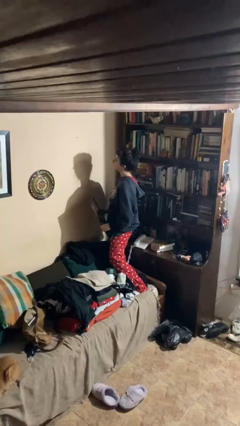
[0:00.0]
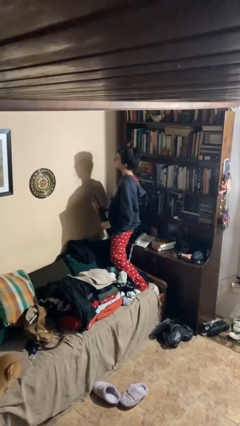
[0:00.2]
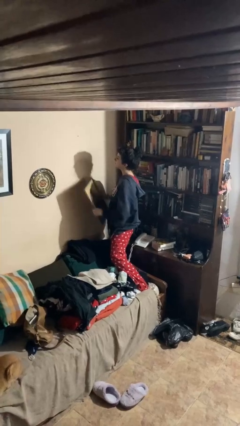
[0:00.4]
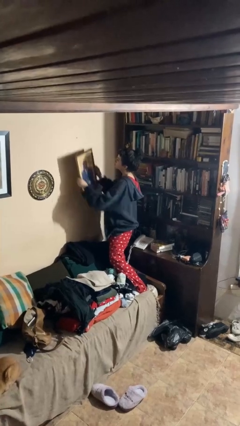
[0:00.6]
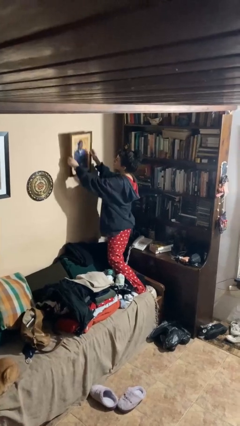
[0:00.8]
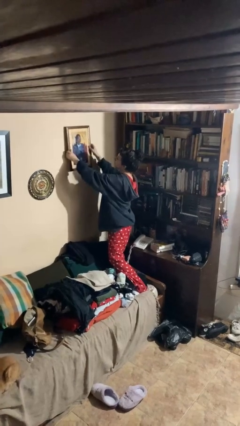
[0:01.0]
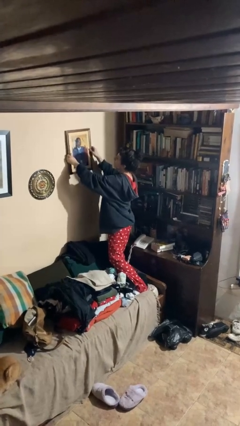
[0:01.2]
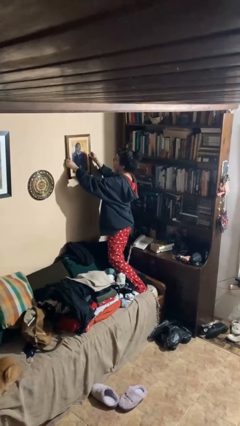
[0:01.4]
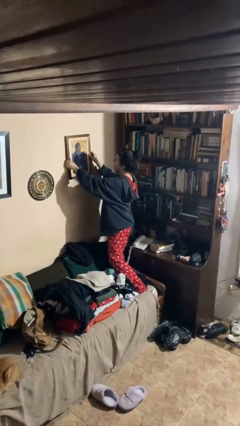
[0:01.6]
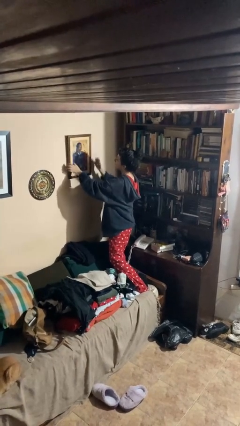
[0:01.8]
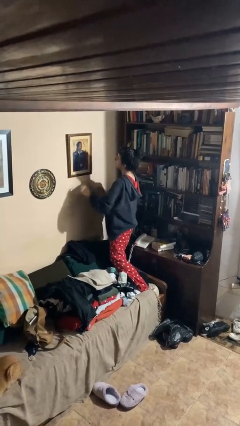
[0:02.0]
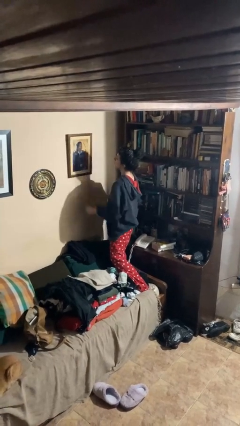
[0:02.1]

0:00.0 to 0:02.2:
person puts up picture frame

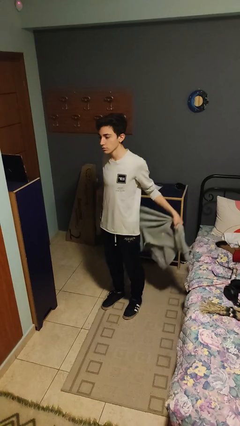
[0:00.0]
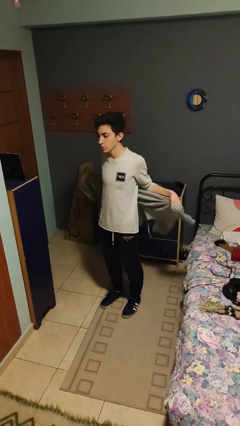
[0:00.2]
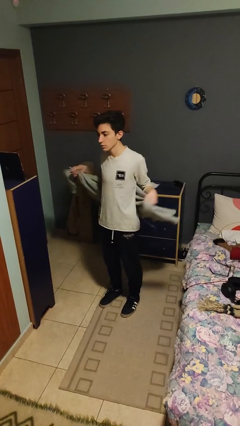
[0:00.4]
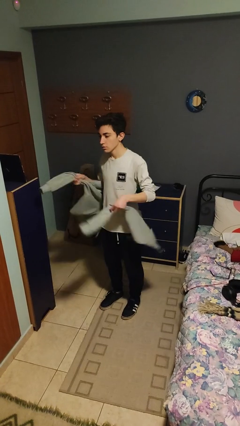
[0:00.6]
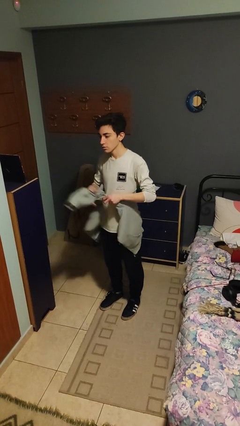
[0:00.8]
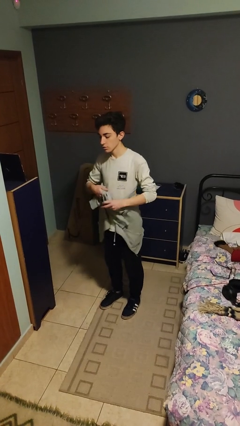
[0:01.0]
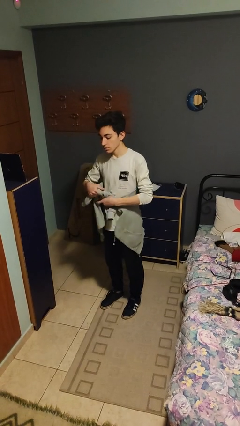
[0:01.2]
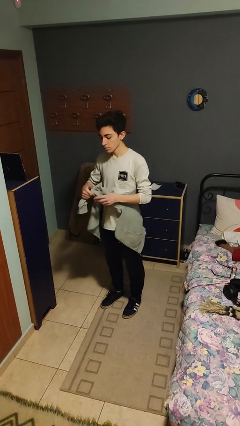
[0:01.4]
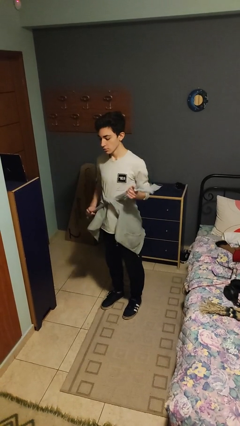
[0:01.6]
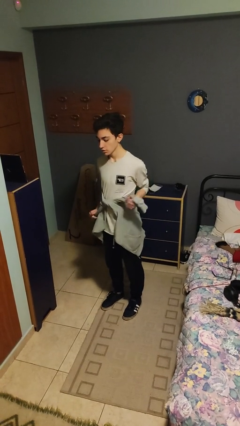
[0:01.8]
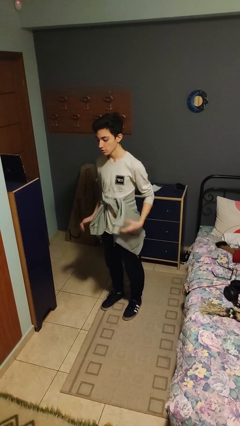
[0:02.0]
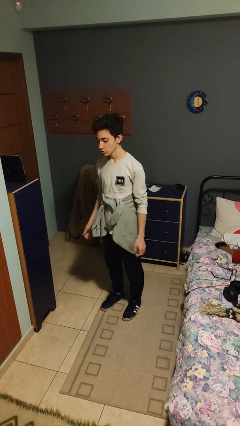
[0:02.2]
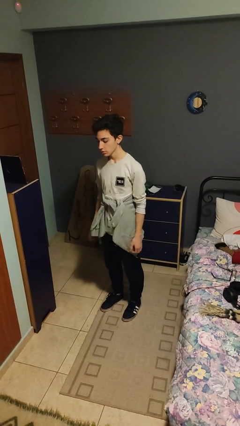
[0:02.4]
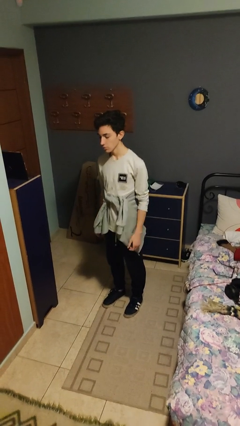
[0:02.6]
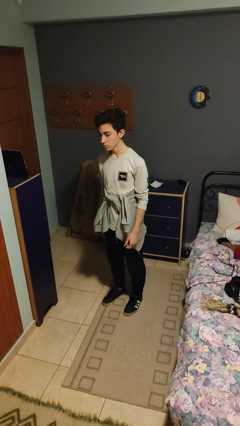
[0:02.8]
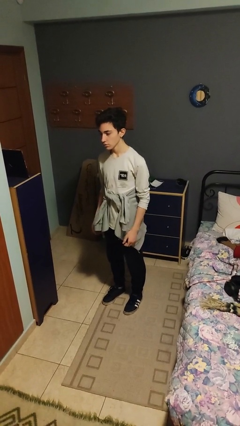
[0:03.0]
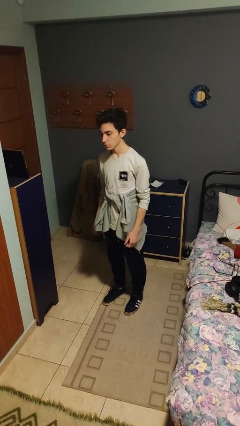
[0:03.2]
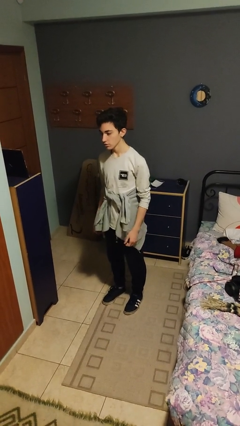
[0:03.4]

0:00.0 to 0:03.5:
person ties jacket around waist

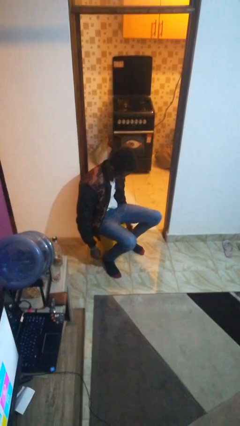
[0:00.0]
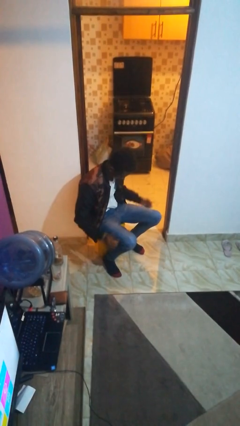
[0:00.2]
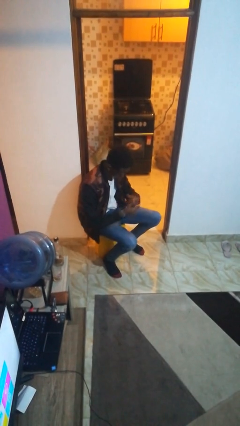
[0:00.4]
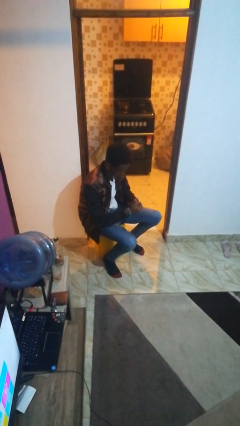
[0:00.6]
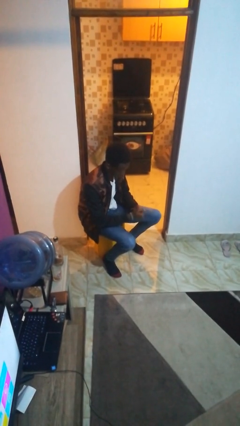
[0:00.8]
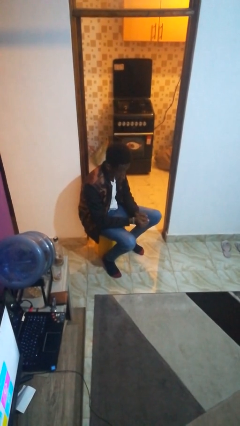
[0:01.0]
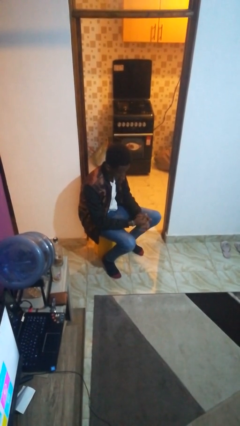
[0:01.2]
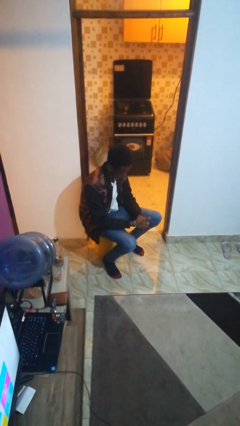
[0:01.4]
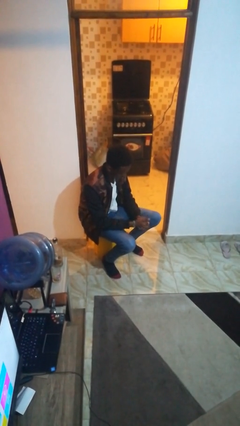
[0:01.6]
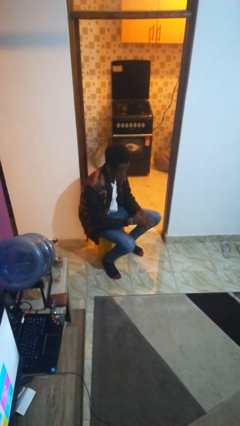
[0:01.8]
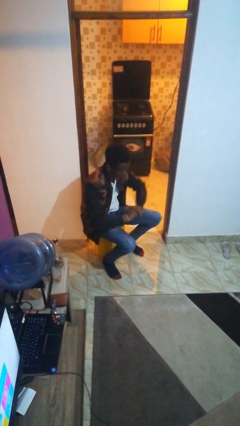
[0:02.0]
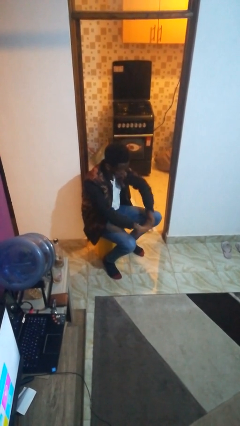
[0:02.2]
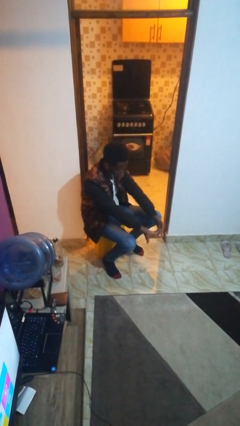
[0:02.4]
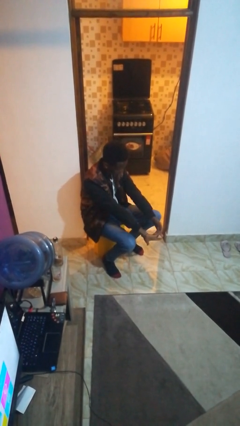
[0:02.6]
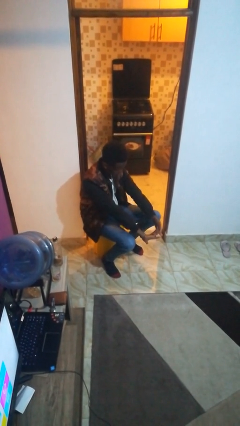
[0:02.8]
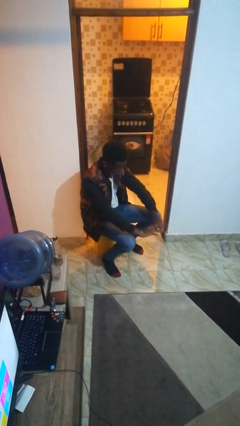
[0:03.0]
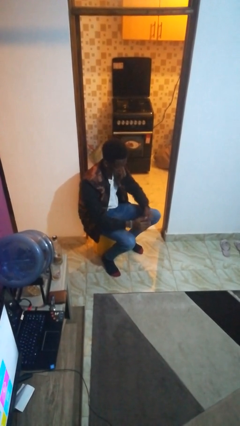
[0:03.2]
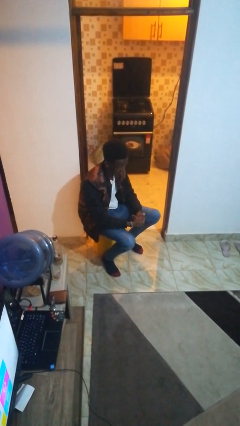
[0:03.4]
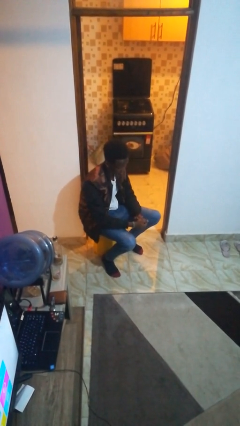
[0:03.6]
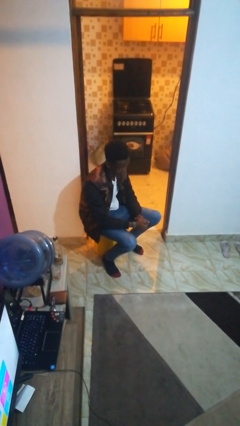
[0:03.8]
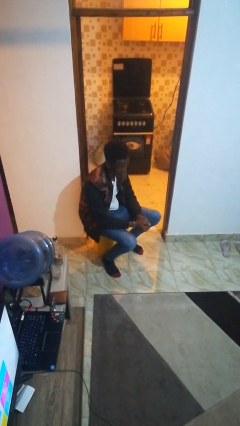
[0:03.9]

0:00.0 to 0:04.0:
person cracks knuckles

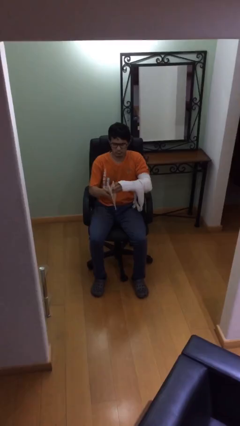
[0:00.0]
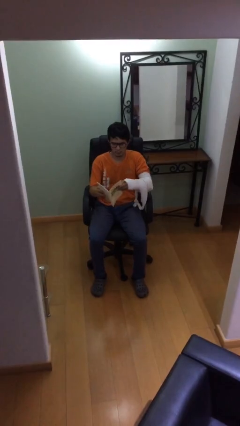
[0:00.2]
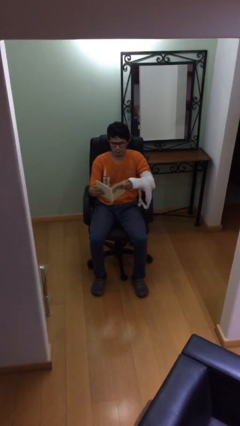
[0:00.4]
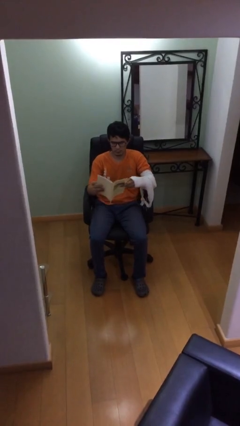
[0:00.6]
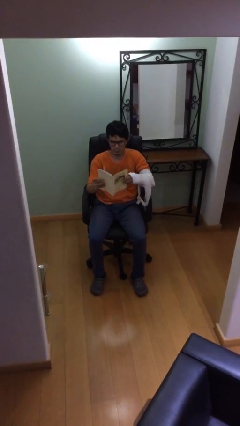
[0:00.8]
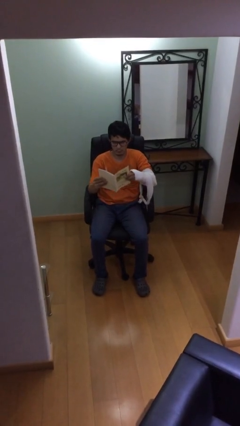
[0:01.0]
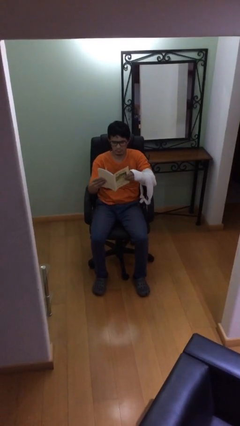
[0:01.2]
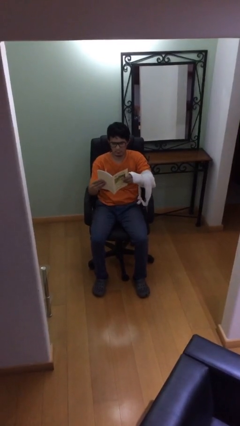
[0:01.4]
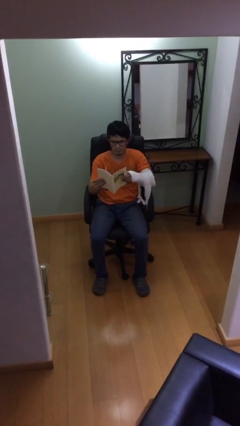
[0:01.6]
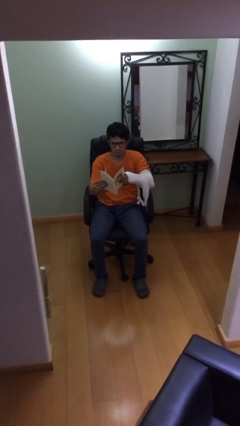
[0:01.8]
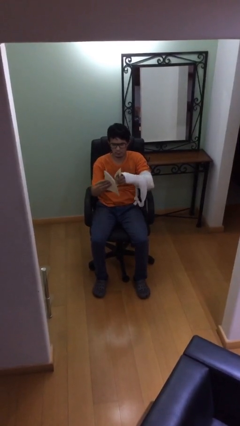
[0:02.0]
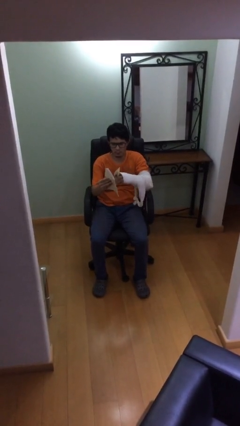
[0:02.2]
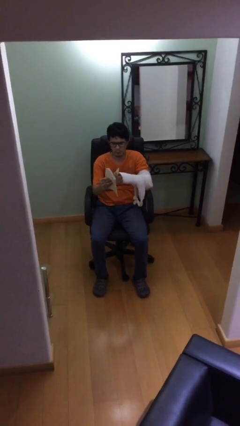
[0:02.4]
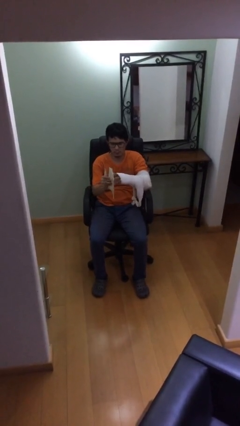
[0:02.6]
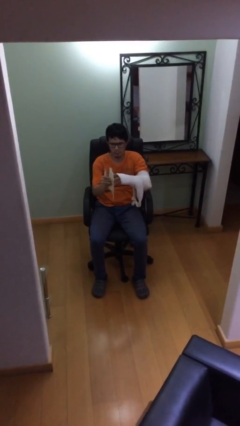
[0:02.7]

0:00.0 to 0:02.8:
person reads document

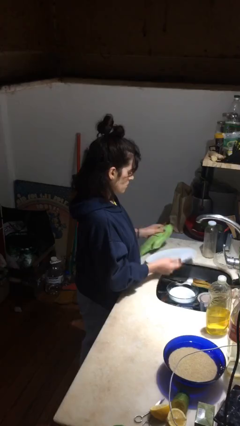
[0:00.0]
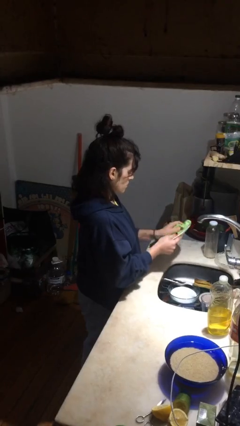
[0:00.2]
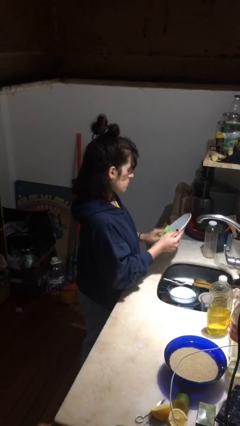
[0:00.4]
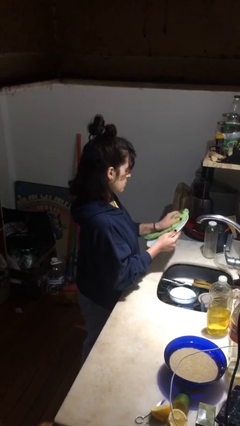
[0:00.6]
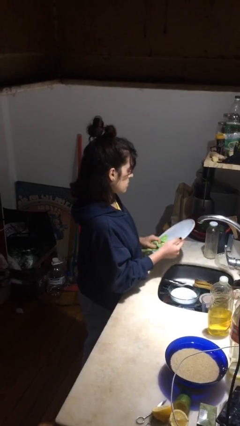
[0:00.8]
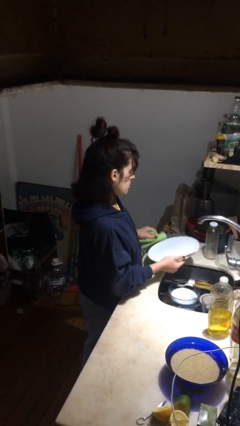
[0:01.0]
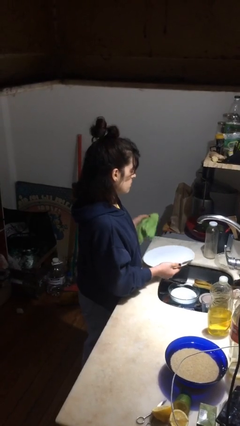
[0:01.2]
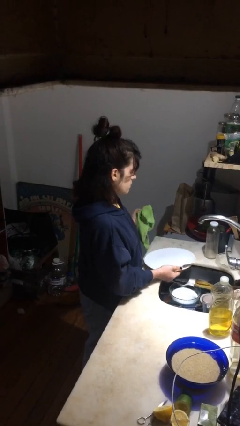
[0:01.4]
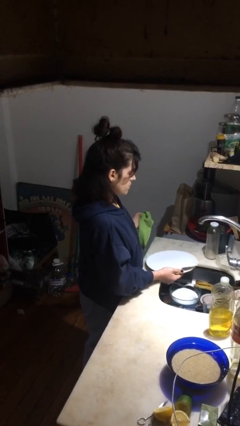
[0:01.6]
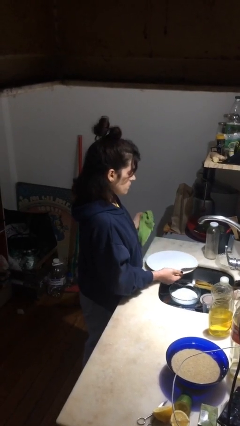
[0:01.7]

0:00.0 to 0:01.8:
person dries dish

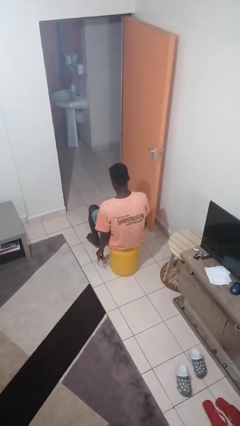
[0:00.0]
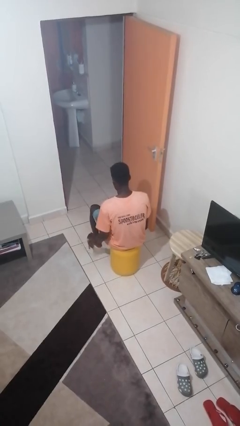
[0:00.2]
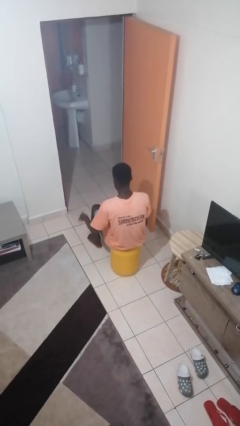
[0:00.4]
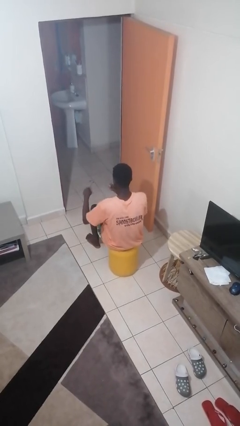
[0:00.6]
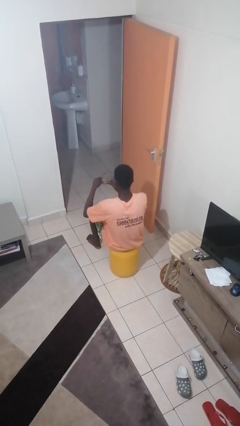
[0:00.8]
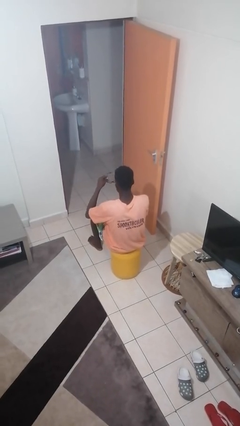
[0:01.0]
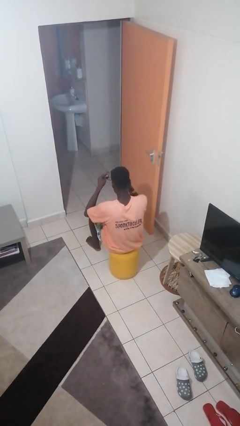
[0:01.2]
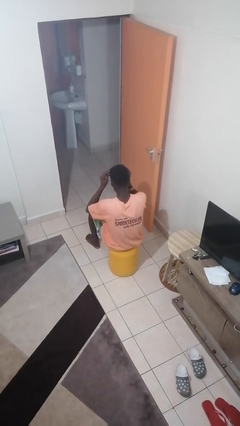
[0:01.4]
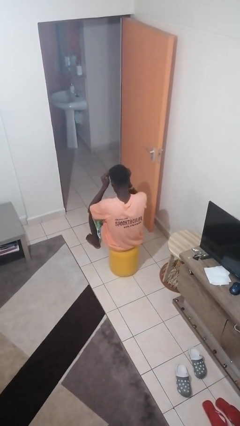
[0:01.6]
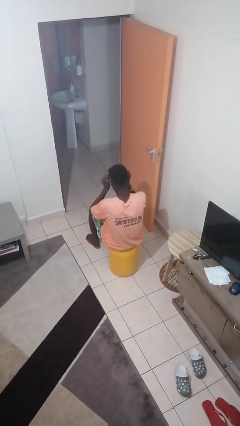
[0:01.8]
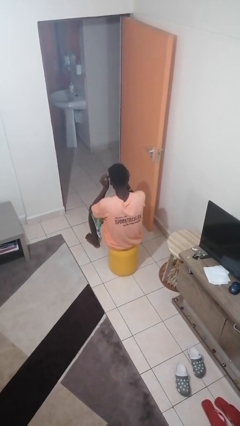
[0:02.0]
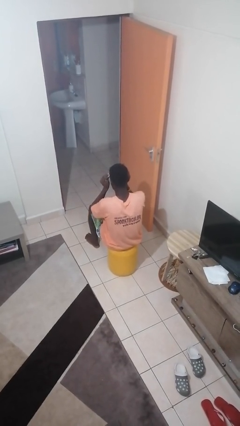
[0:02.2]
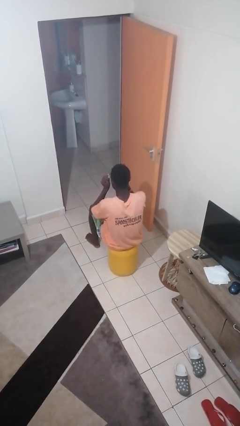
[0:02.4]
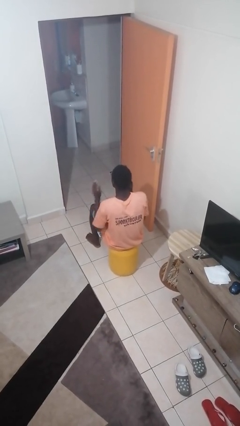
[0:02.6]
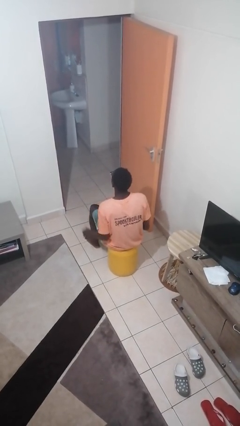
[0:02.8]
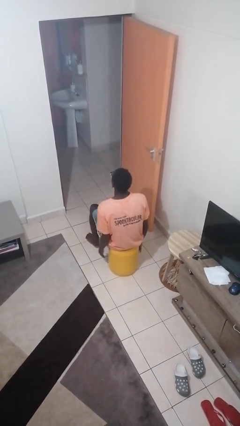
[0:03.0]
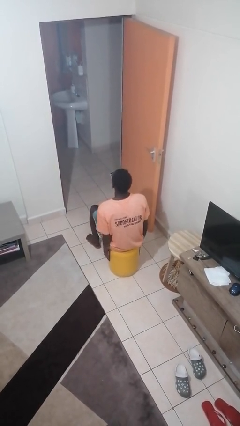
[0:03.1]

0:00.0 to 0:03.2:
person puts on glasses

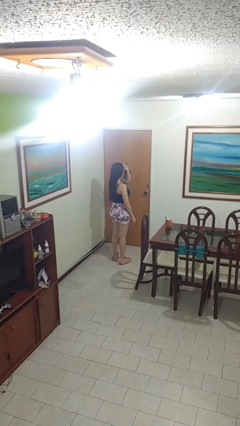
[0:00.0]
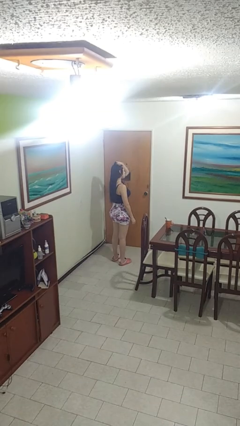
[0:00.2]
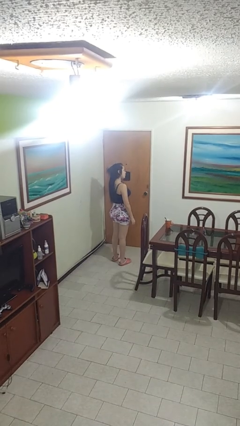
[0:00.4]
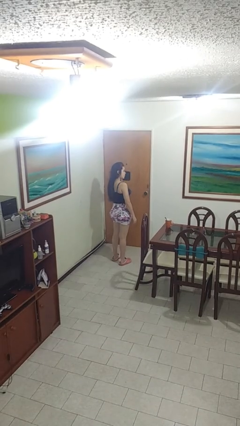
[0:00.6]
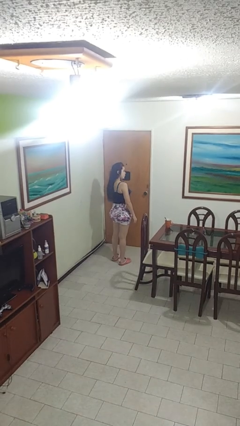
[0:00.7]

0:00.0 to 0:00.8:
person strokes hair
